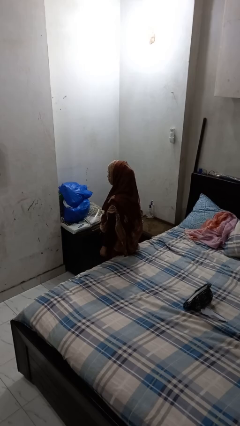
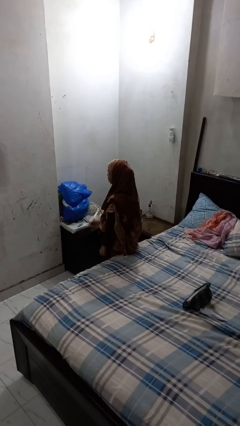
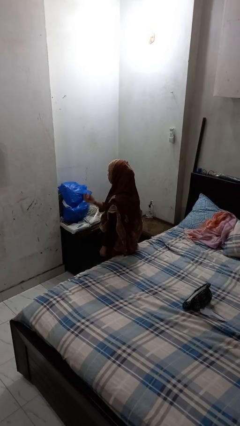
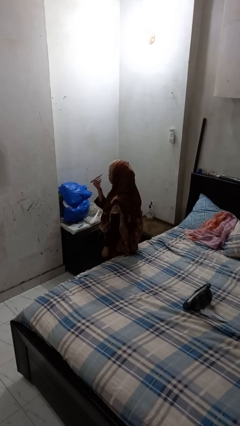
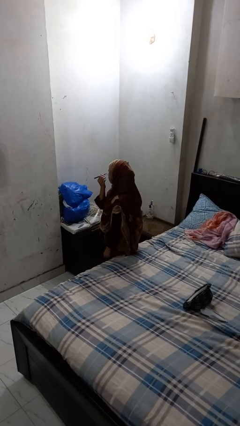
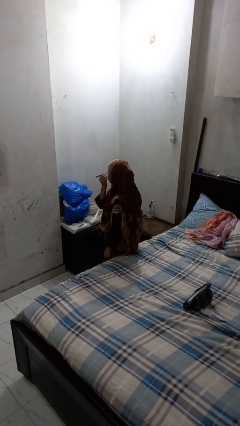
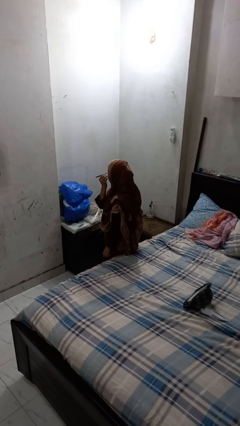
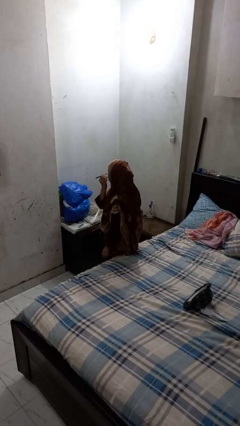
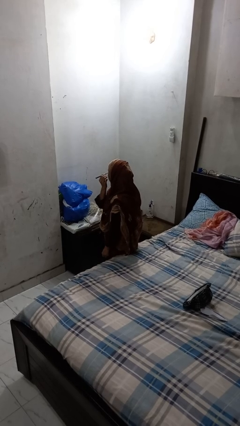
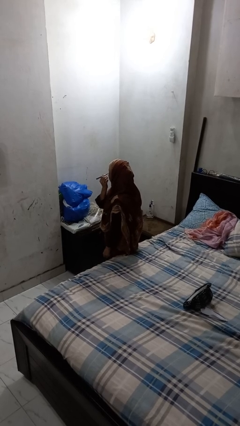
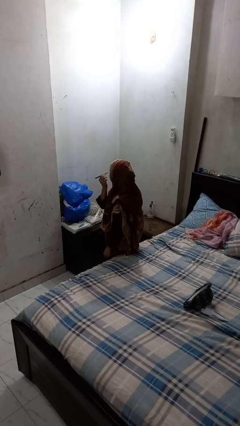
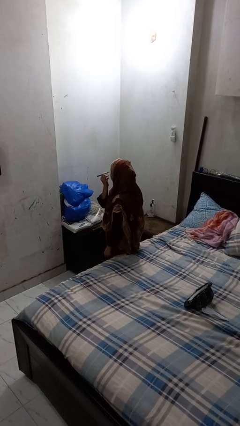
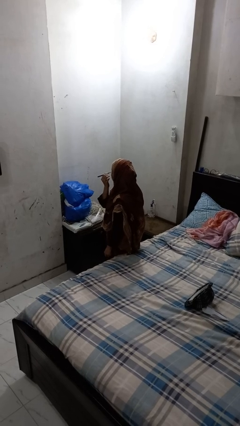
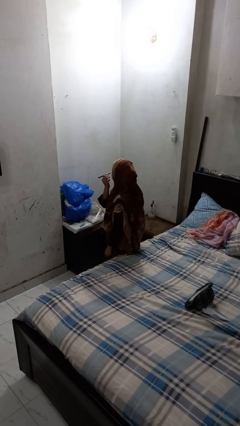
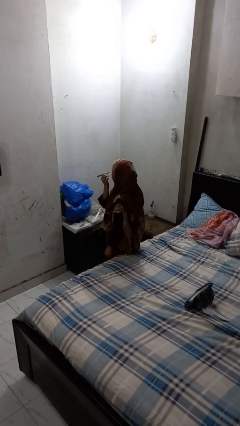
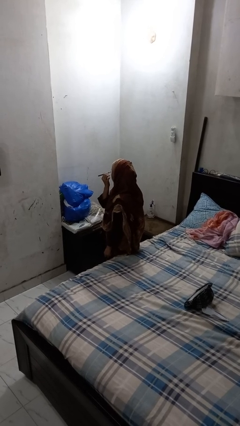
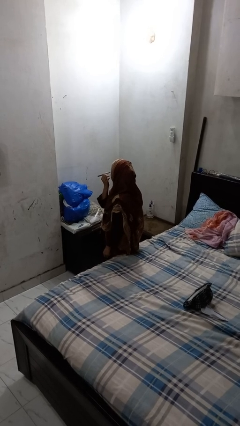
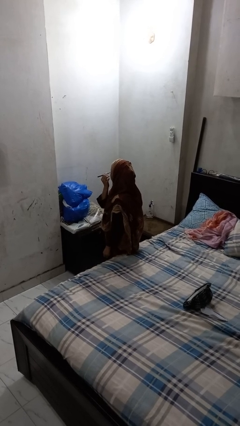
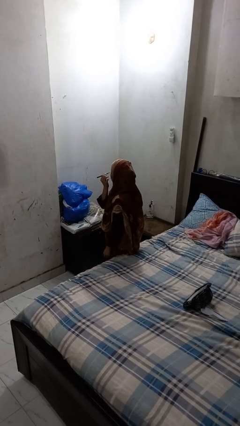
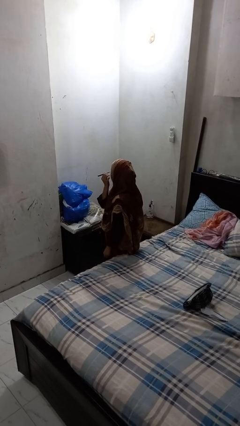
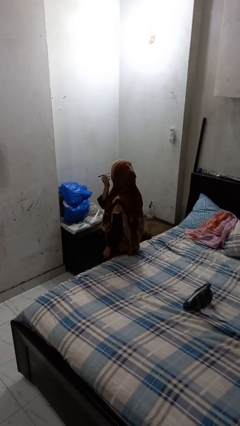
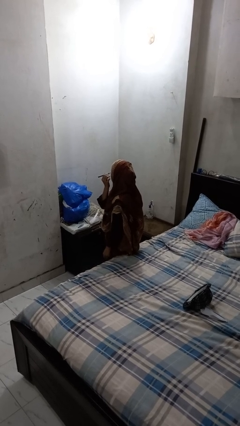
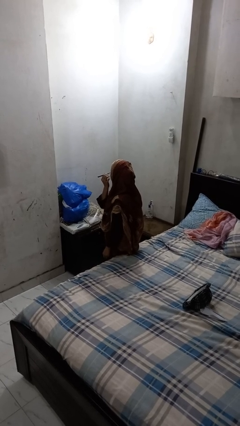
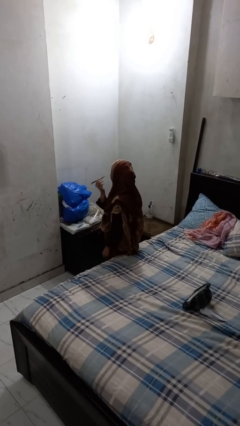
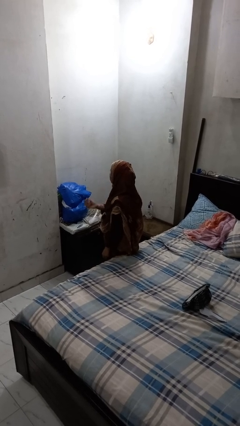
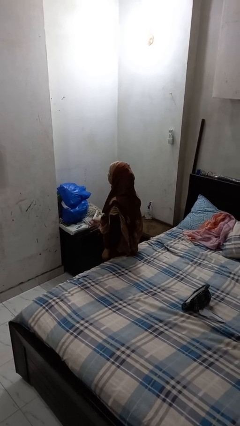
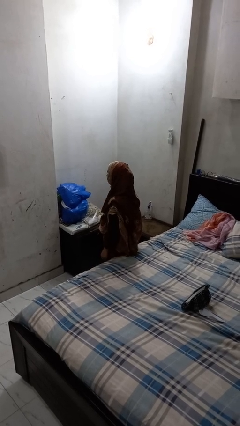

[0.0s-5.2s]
person applies eye makeup

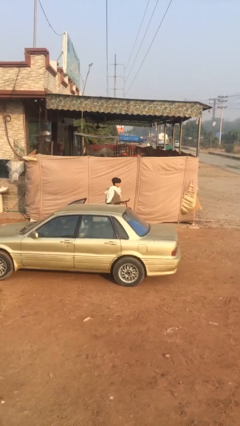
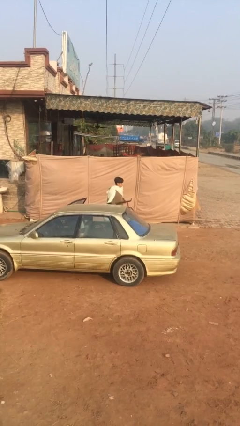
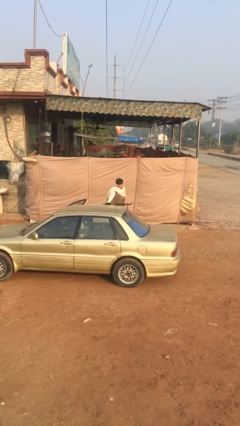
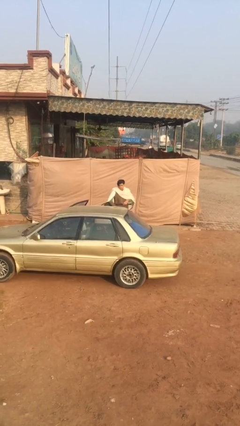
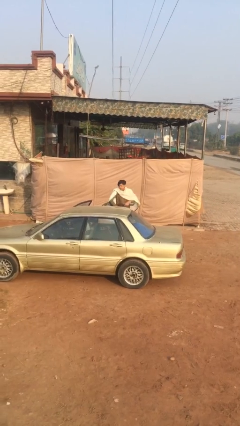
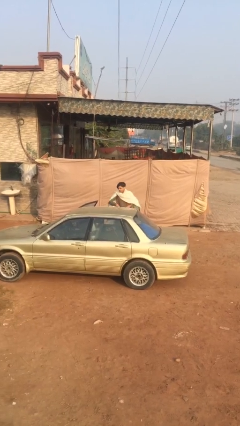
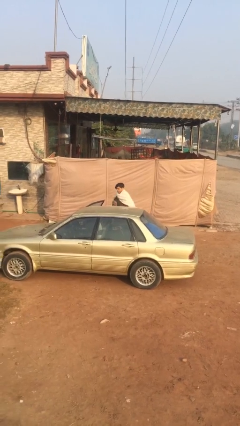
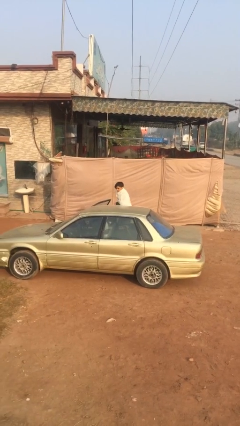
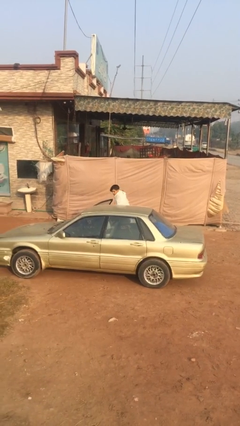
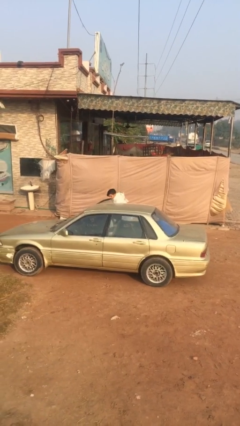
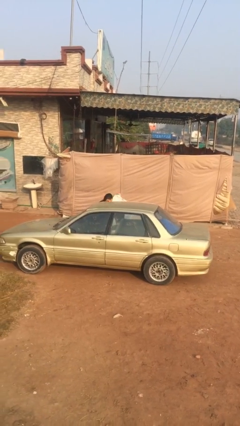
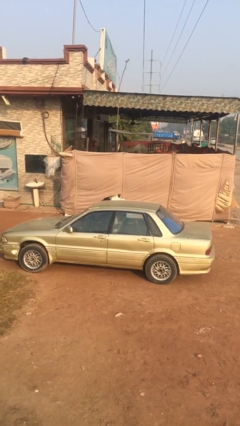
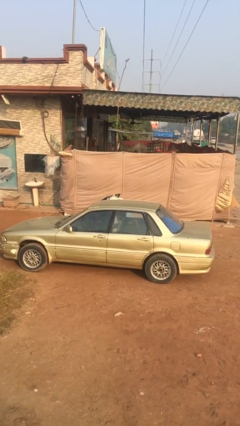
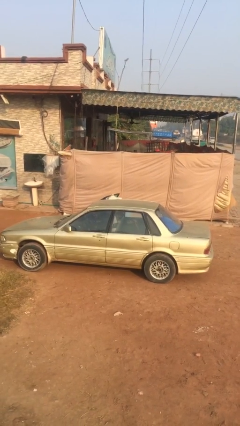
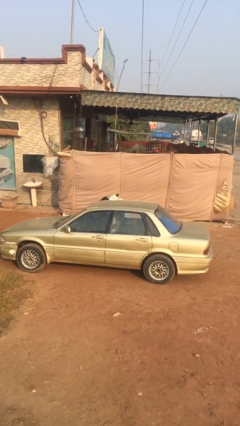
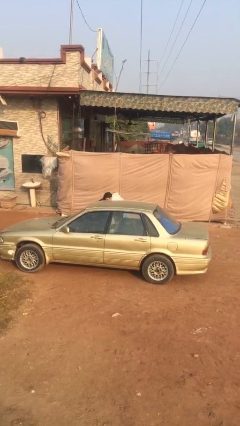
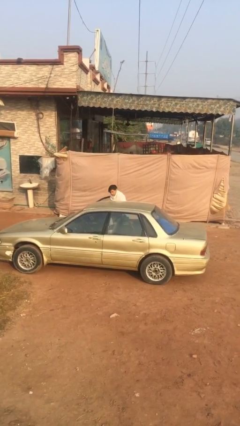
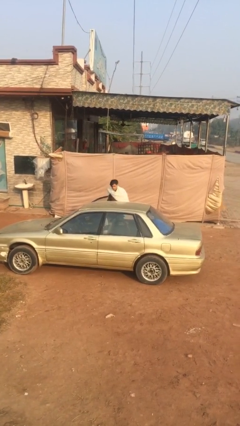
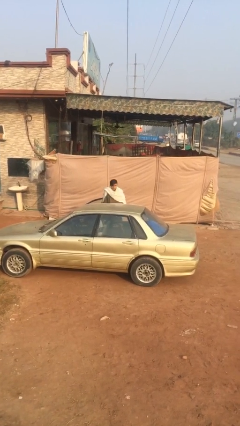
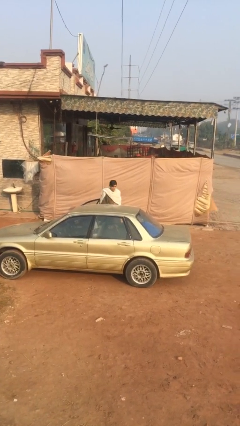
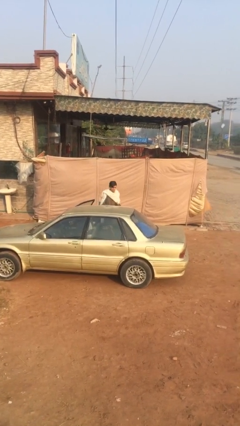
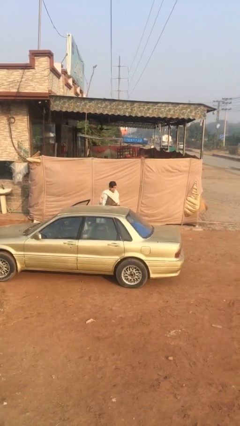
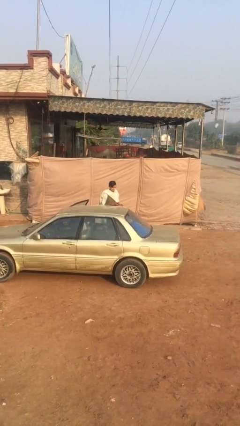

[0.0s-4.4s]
person loads car

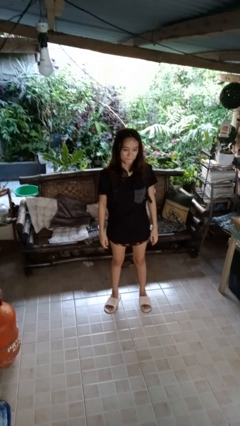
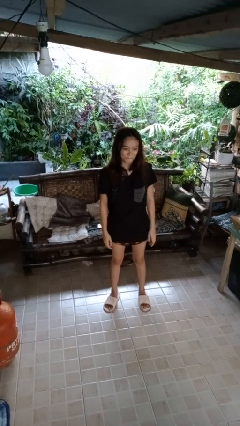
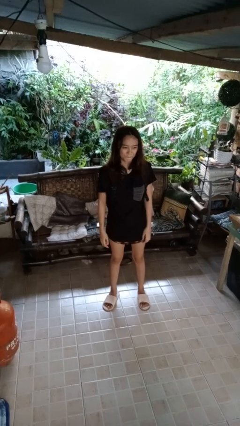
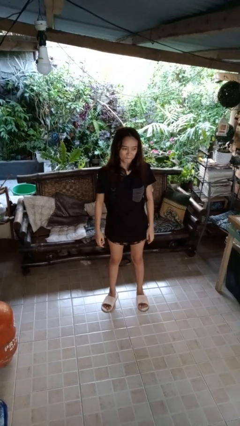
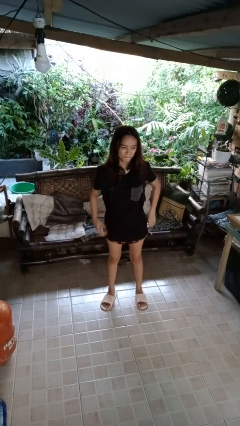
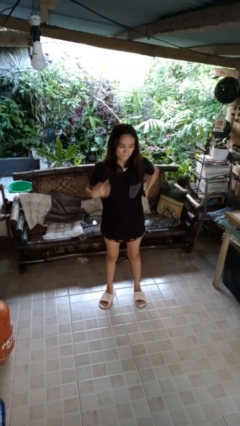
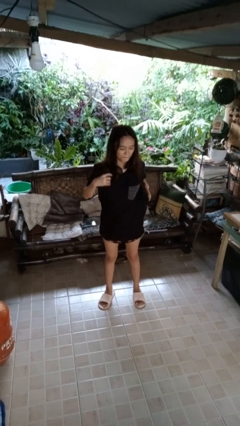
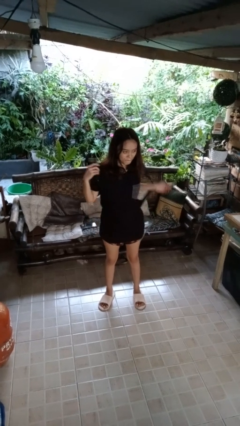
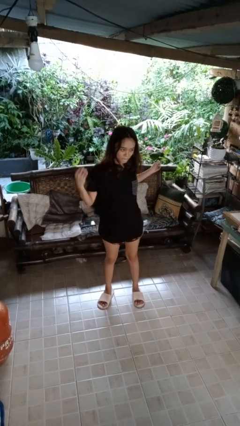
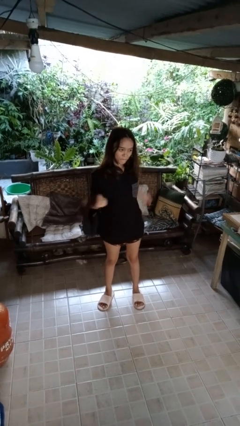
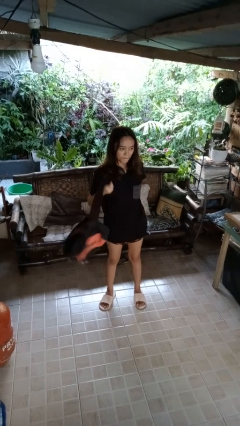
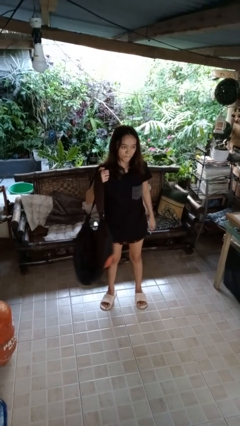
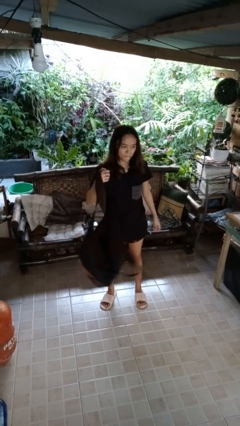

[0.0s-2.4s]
person takes off backpack

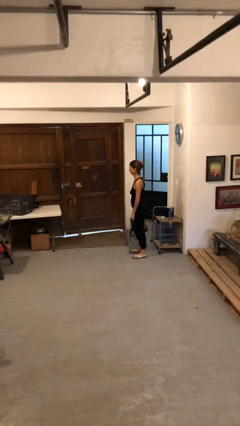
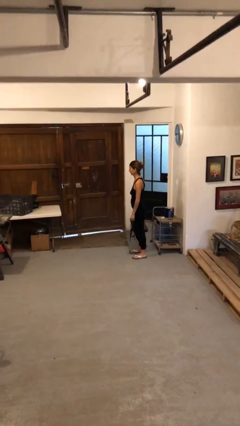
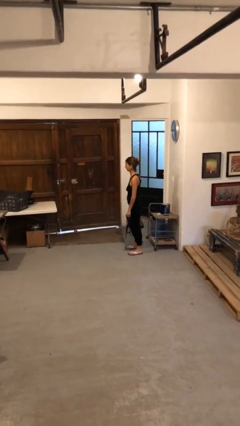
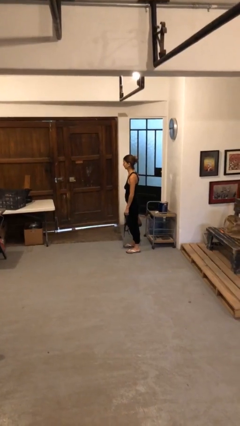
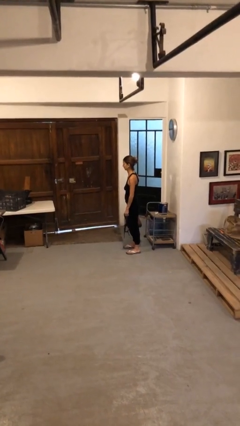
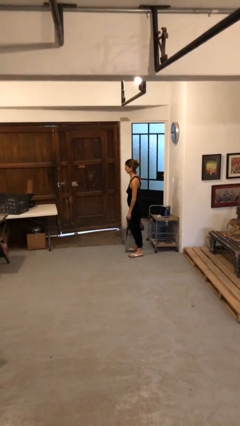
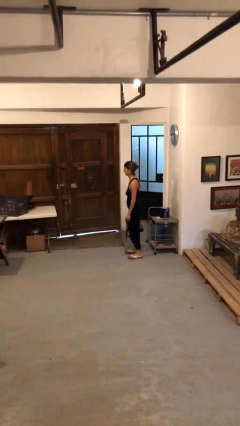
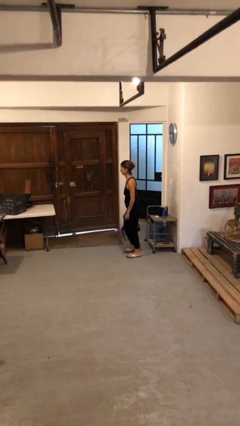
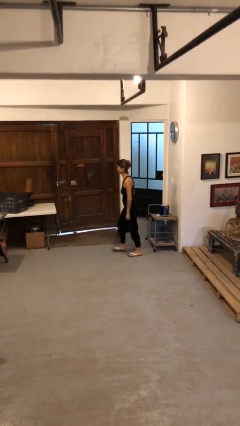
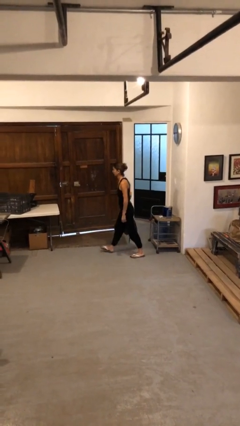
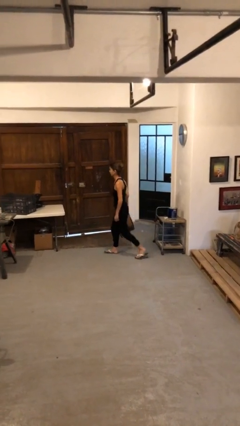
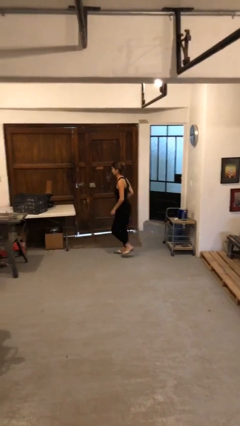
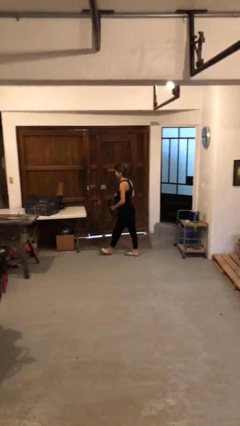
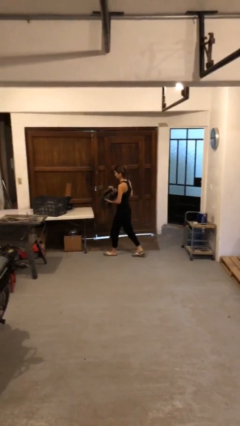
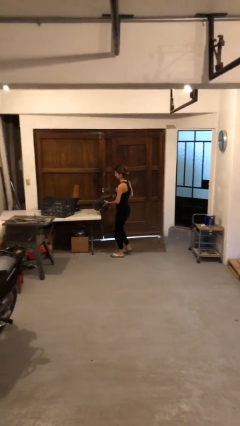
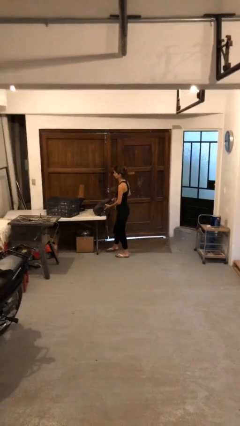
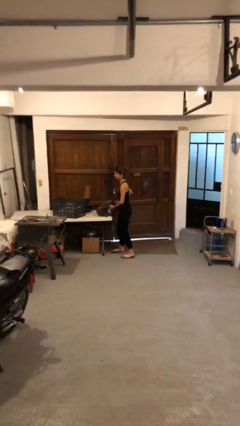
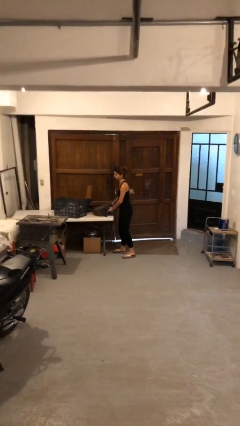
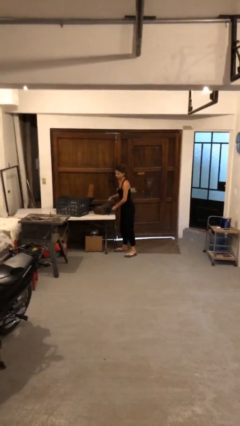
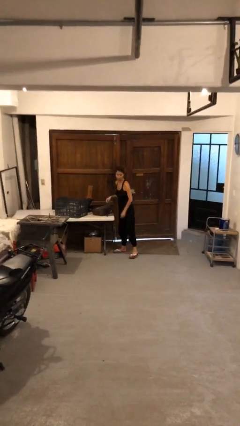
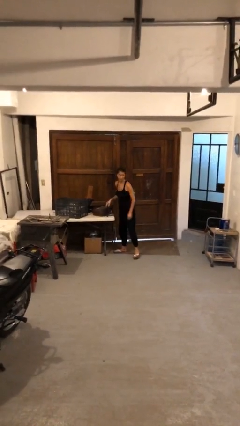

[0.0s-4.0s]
person puts down object on table

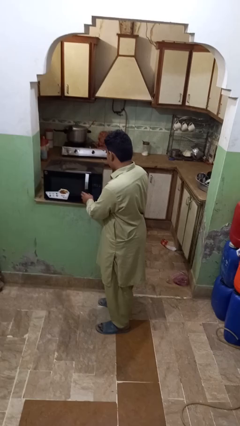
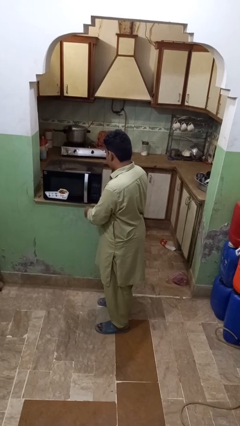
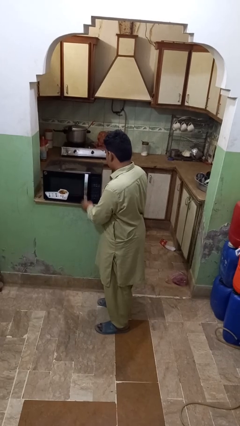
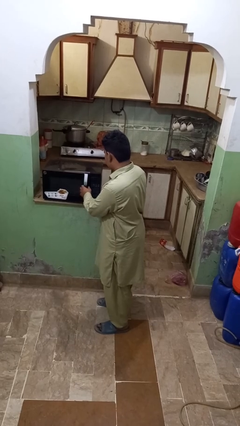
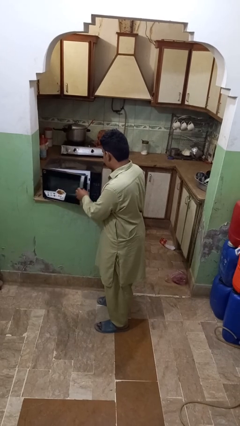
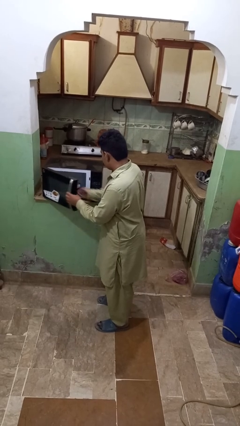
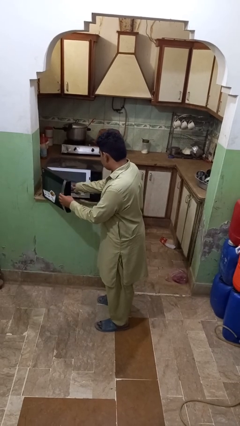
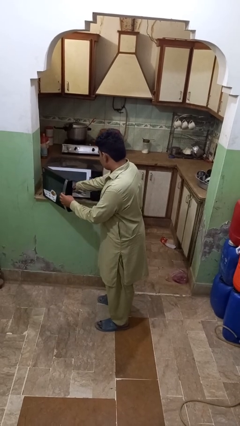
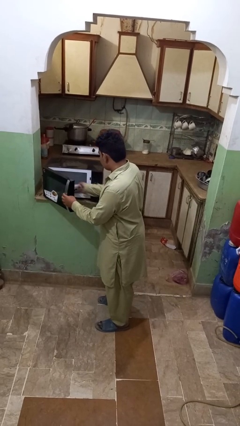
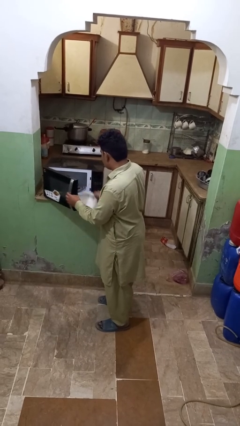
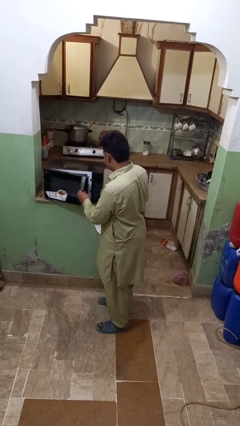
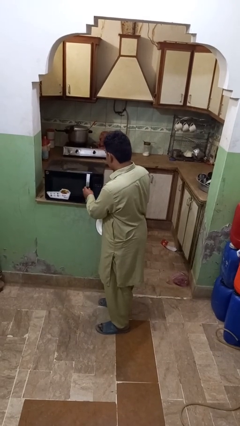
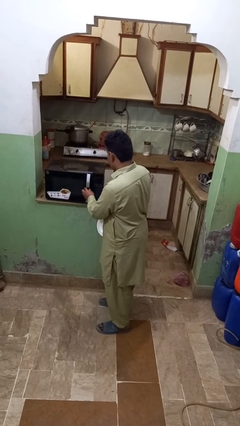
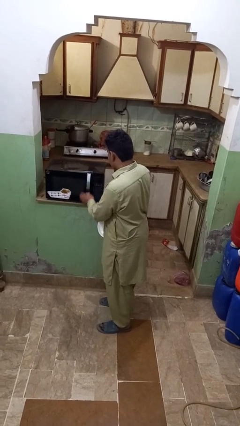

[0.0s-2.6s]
person takes object from microwave
